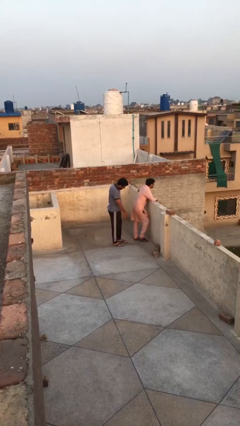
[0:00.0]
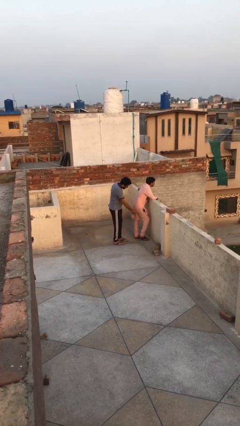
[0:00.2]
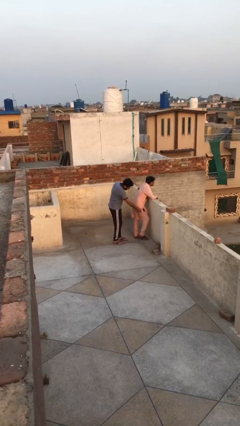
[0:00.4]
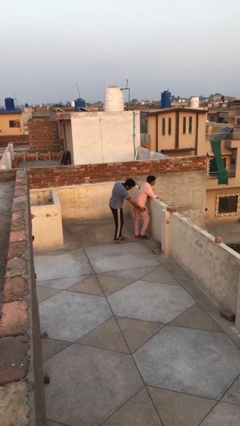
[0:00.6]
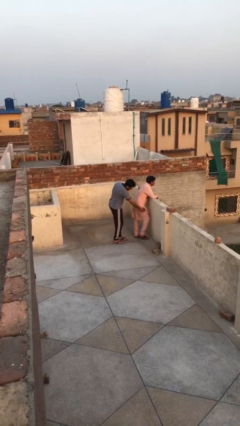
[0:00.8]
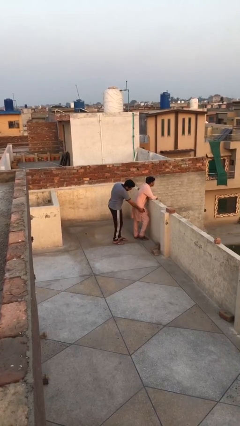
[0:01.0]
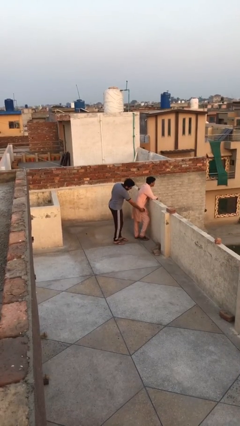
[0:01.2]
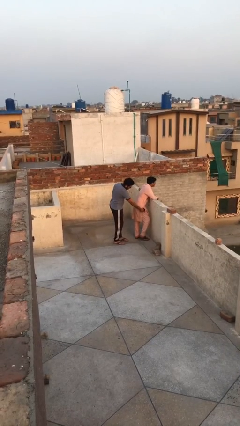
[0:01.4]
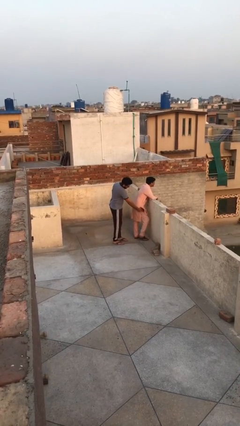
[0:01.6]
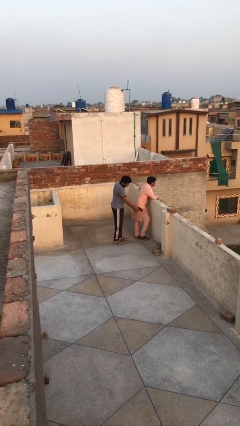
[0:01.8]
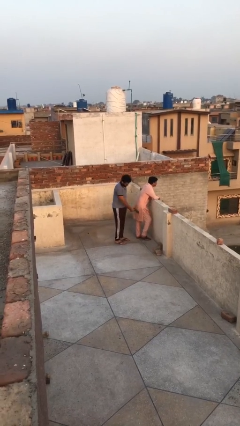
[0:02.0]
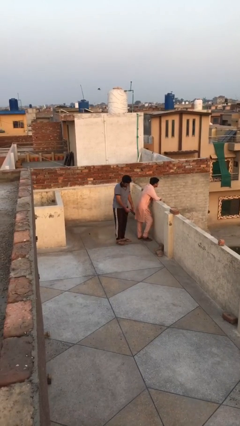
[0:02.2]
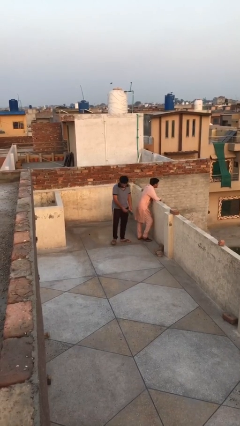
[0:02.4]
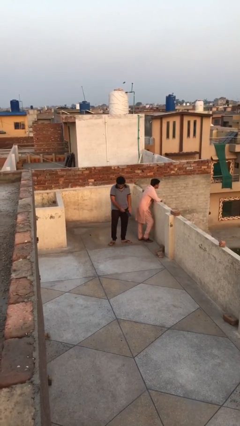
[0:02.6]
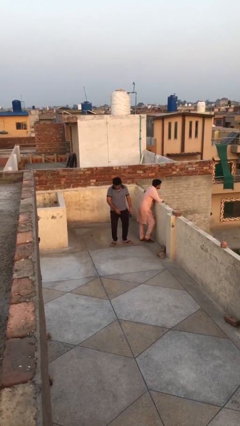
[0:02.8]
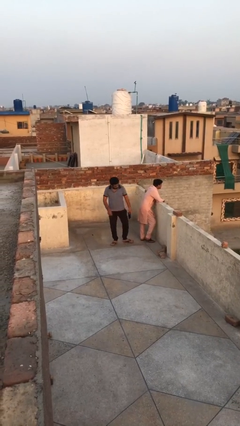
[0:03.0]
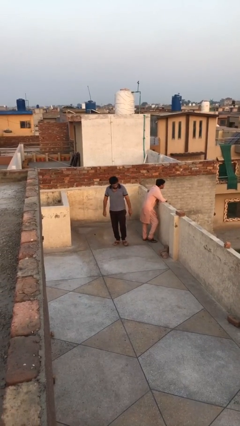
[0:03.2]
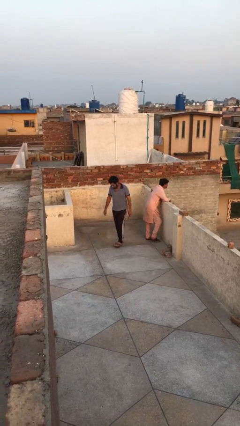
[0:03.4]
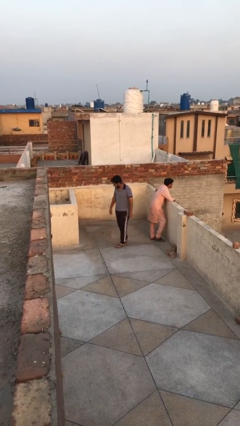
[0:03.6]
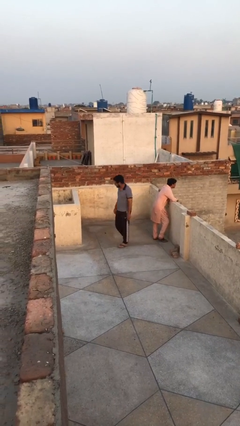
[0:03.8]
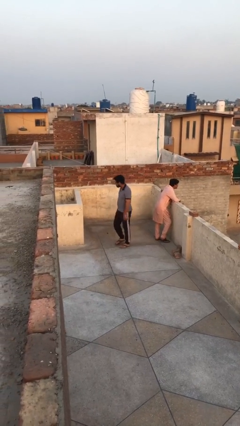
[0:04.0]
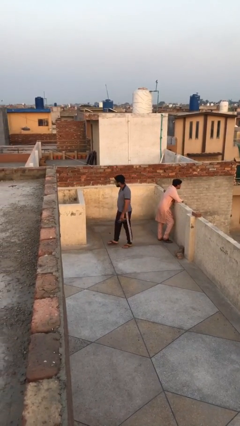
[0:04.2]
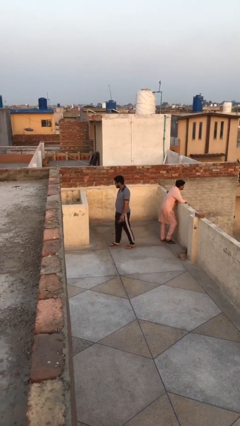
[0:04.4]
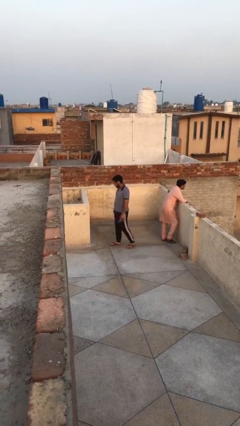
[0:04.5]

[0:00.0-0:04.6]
person steals object from person

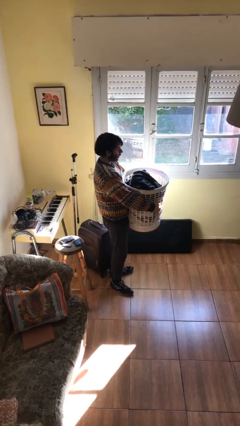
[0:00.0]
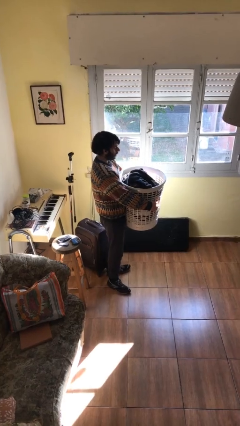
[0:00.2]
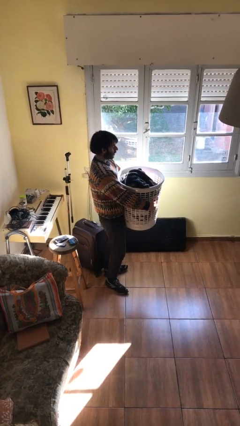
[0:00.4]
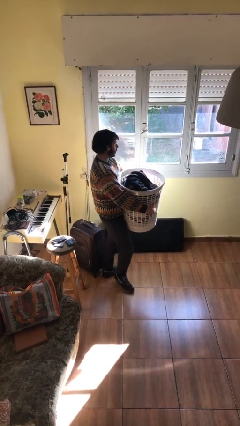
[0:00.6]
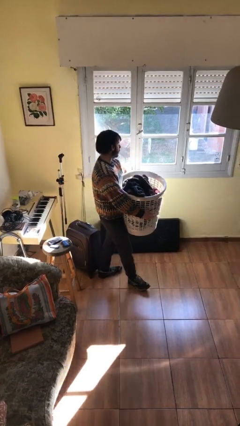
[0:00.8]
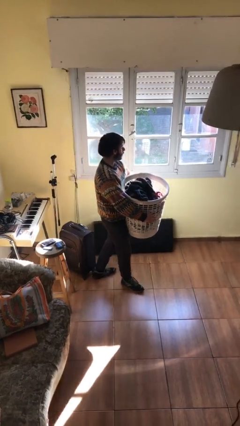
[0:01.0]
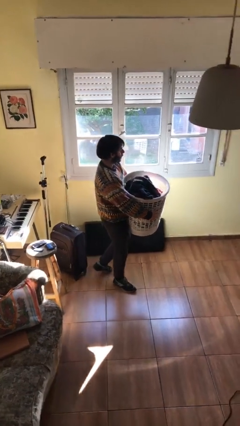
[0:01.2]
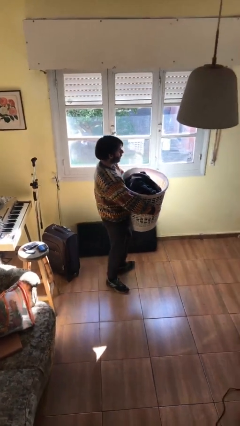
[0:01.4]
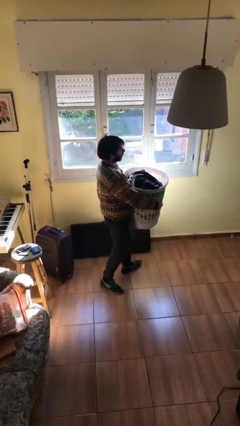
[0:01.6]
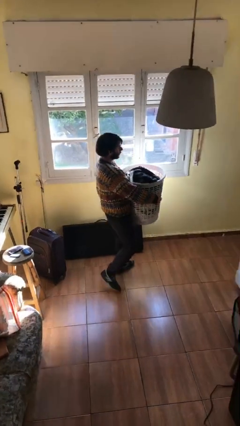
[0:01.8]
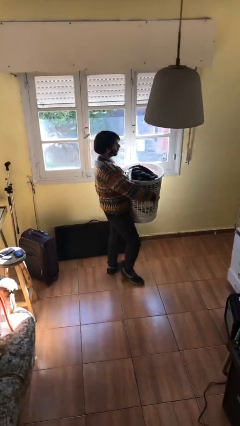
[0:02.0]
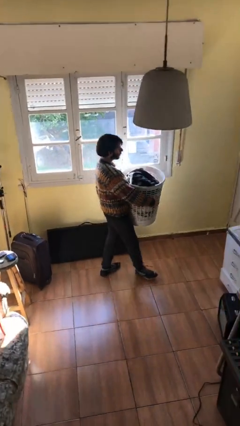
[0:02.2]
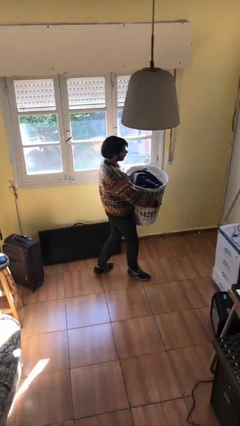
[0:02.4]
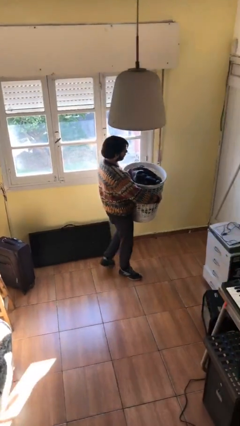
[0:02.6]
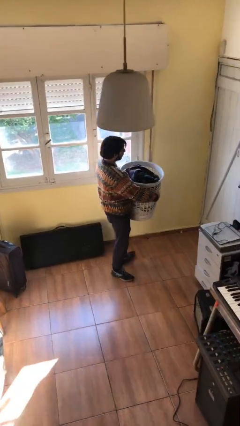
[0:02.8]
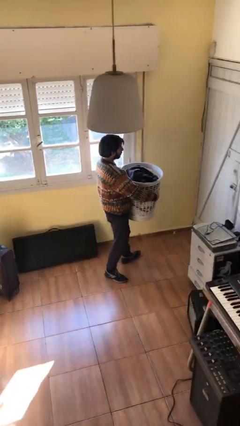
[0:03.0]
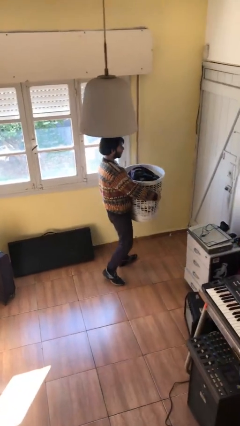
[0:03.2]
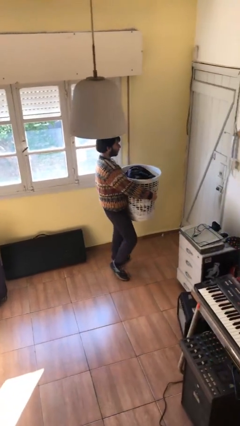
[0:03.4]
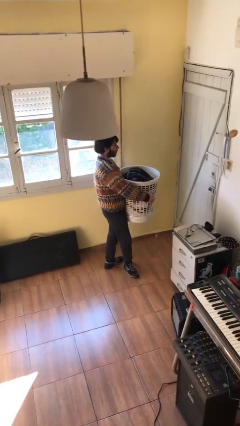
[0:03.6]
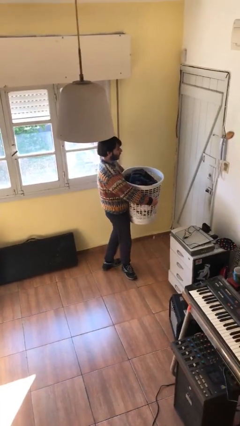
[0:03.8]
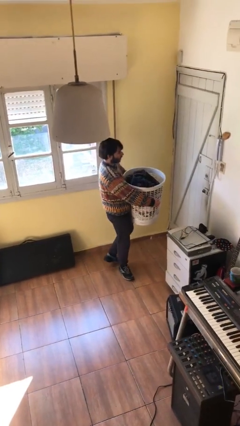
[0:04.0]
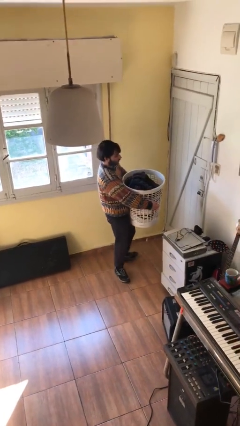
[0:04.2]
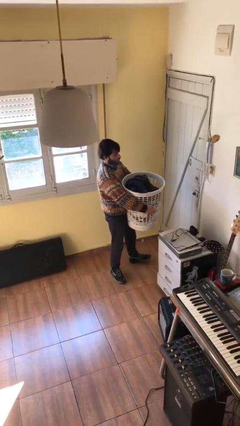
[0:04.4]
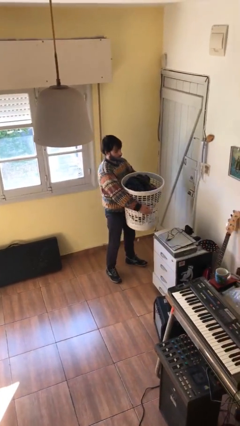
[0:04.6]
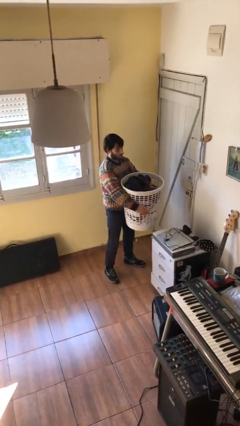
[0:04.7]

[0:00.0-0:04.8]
person carries laundry basket

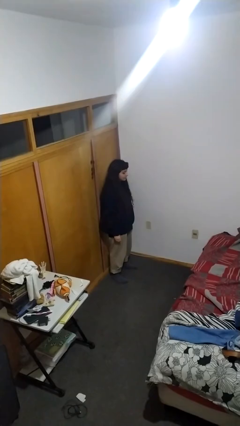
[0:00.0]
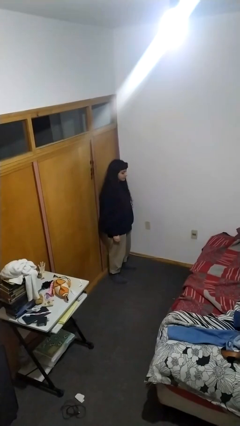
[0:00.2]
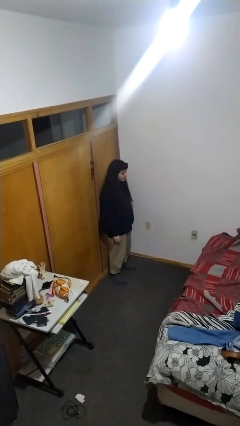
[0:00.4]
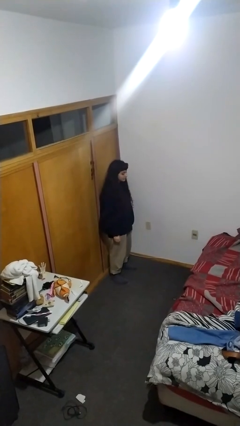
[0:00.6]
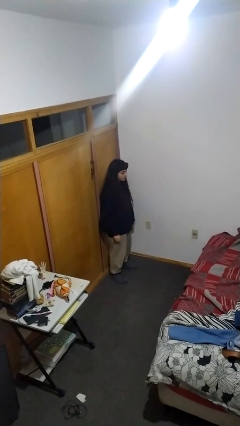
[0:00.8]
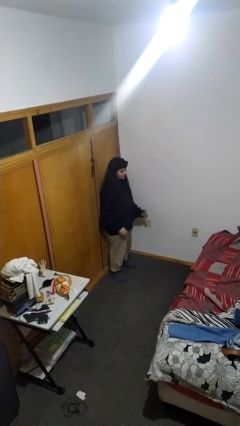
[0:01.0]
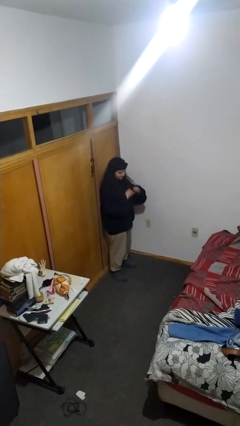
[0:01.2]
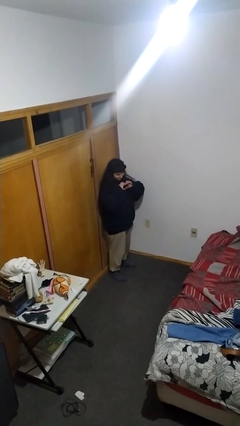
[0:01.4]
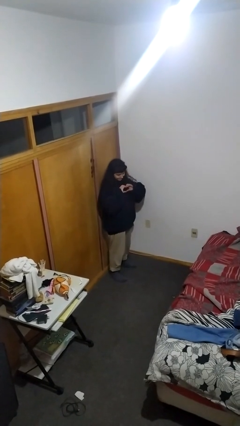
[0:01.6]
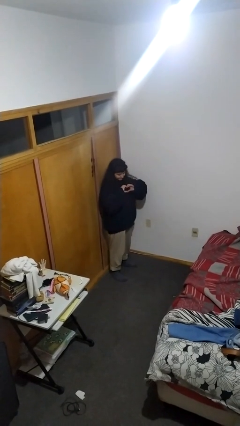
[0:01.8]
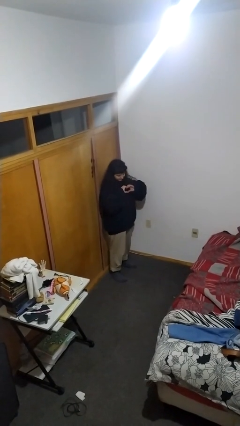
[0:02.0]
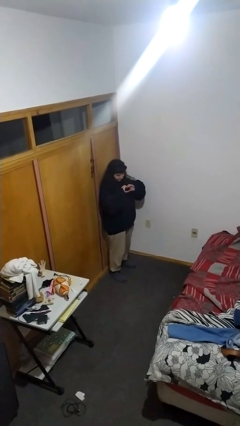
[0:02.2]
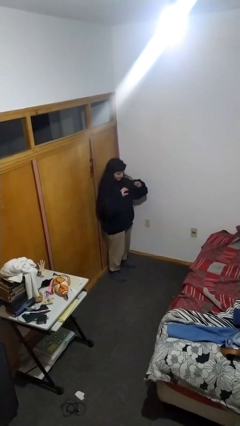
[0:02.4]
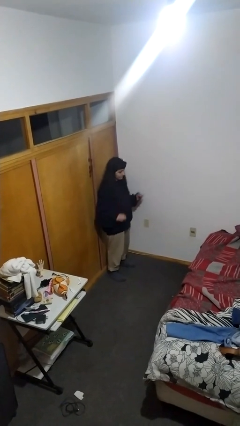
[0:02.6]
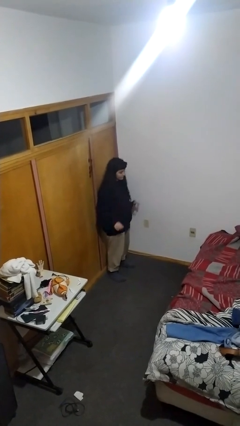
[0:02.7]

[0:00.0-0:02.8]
person gestures heart

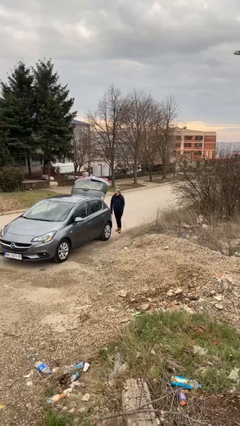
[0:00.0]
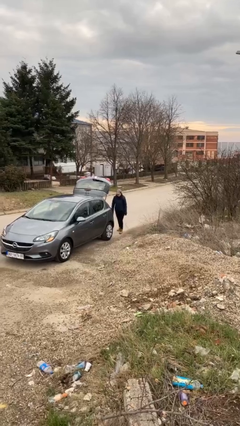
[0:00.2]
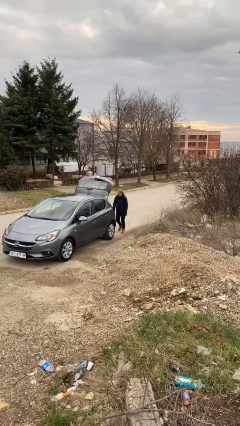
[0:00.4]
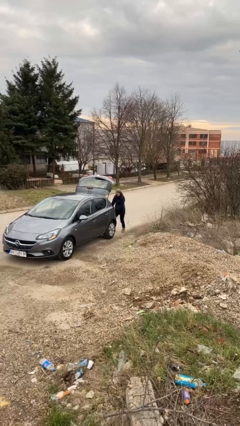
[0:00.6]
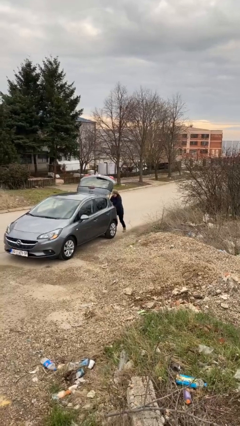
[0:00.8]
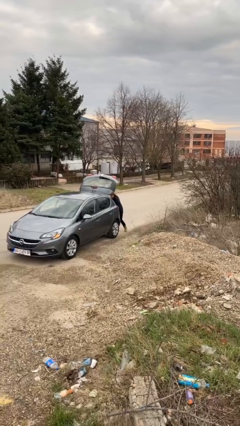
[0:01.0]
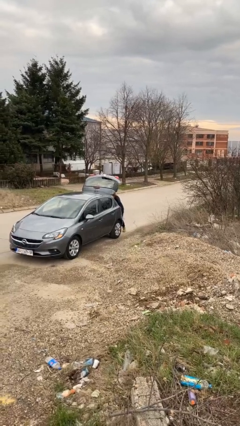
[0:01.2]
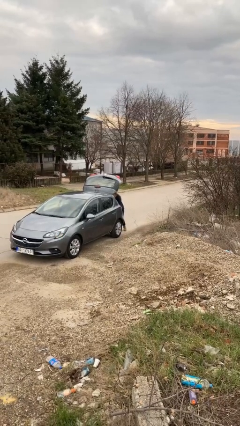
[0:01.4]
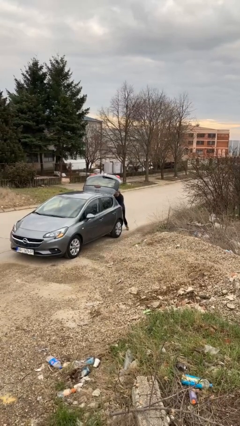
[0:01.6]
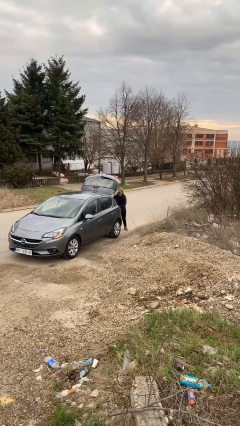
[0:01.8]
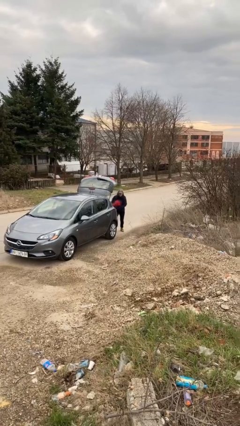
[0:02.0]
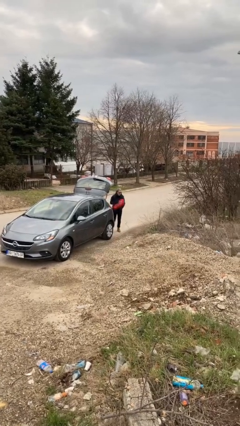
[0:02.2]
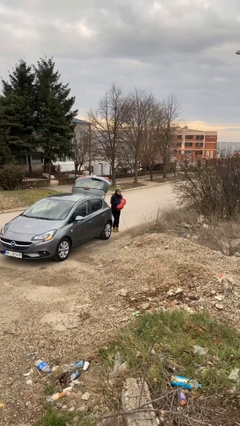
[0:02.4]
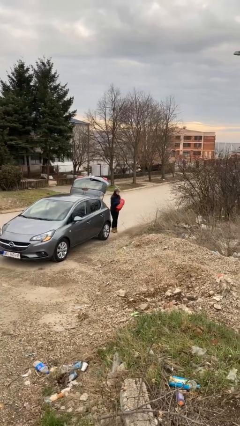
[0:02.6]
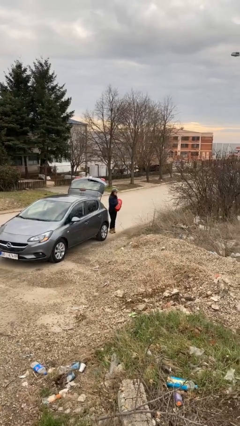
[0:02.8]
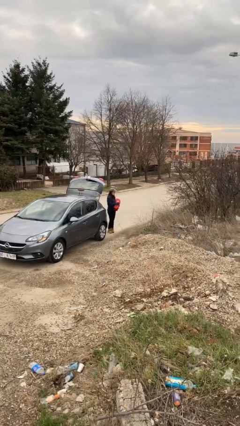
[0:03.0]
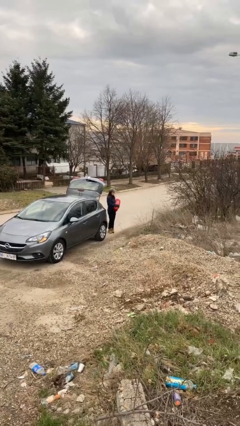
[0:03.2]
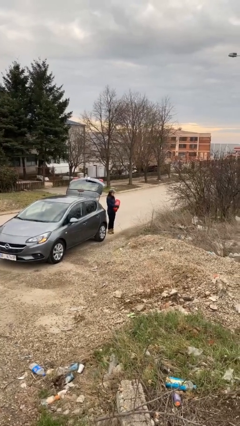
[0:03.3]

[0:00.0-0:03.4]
person unloads car

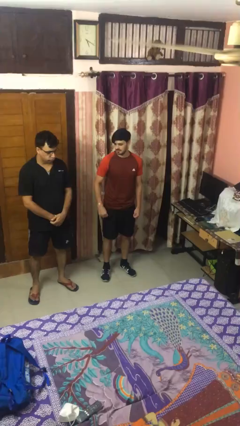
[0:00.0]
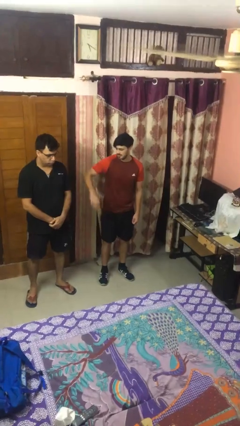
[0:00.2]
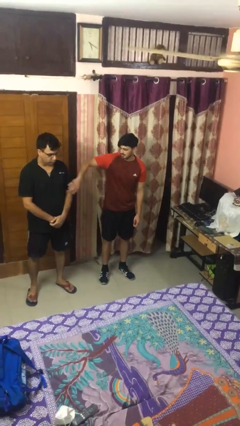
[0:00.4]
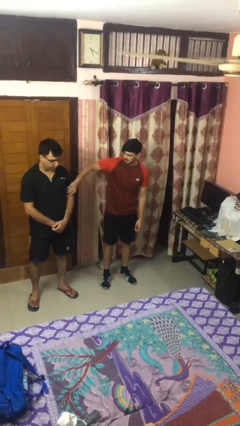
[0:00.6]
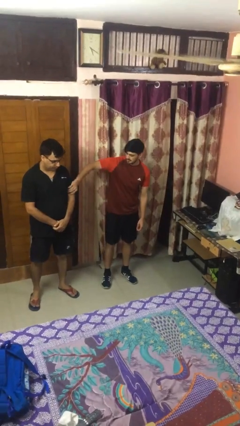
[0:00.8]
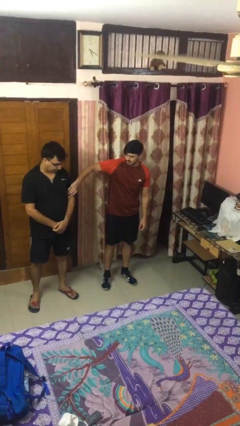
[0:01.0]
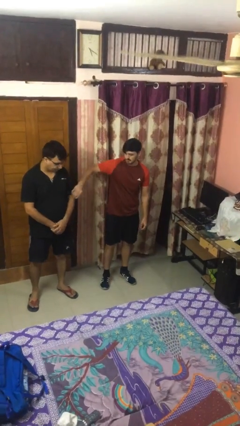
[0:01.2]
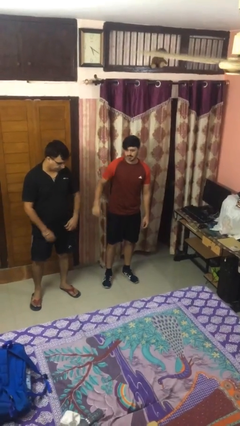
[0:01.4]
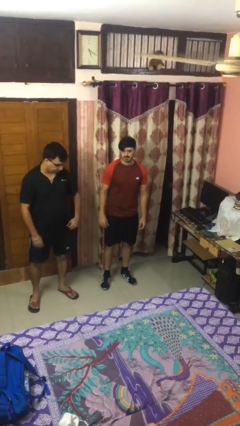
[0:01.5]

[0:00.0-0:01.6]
person grabs person by bicep

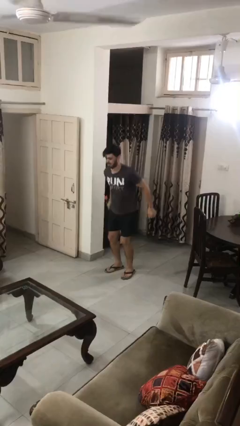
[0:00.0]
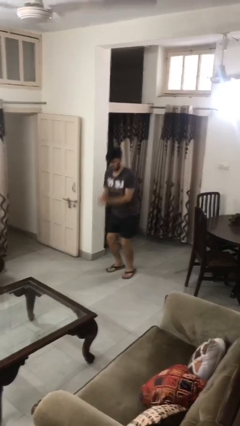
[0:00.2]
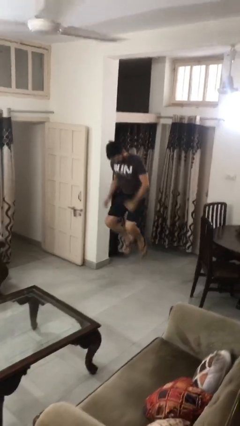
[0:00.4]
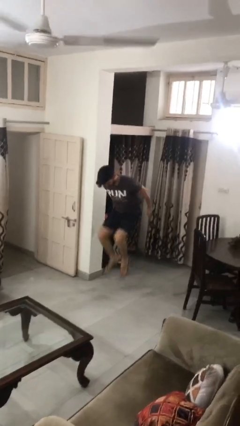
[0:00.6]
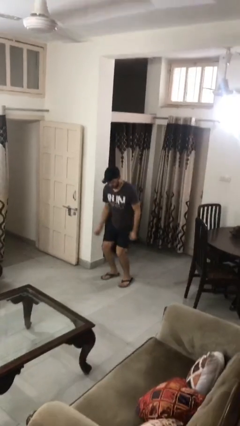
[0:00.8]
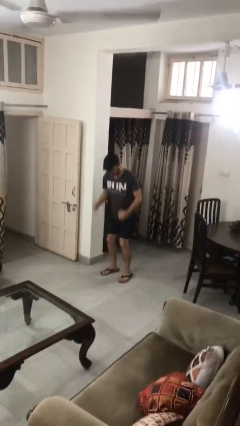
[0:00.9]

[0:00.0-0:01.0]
person jumps
